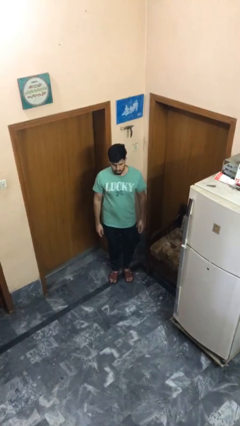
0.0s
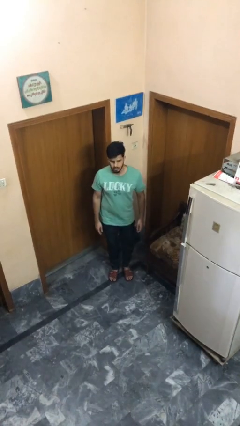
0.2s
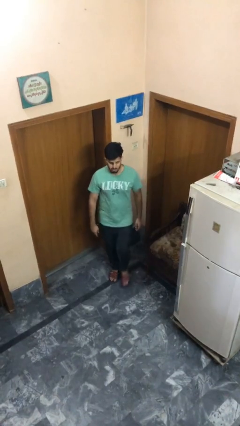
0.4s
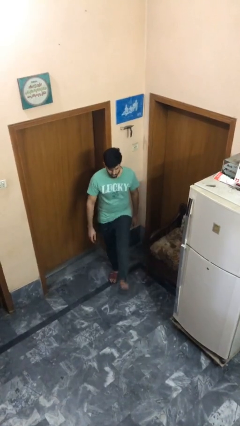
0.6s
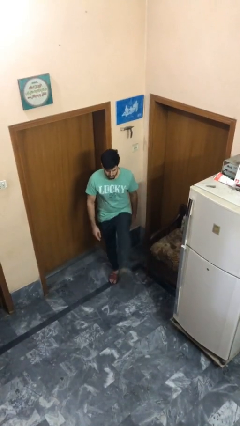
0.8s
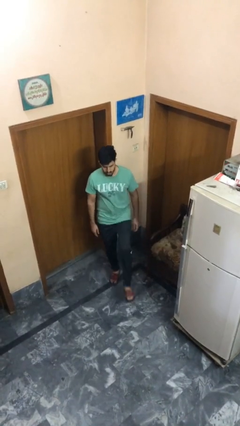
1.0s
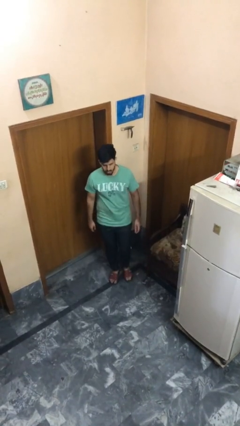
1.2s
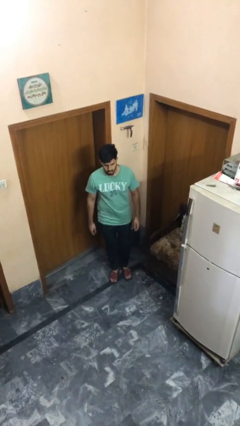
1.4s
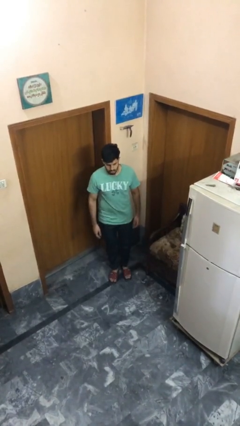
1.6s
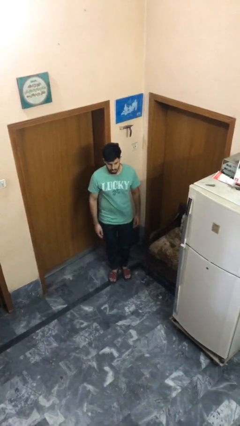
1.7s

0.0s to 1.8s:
person karate kicks

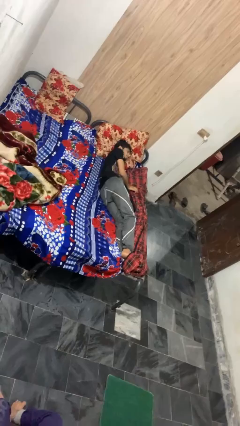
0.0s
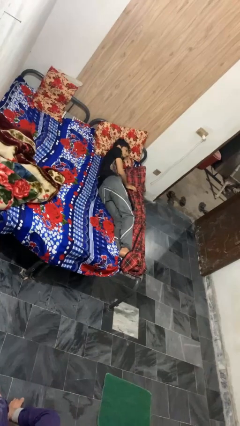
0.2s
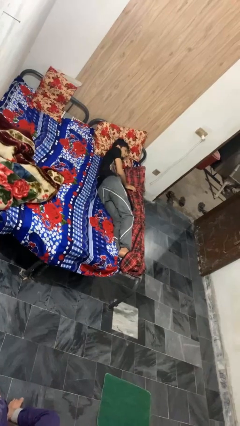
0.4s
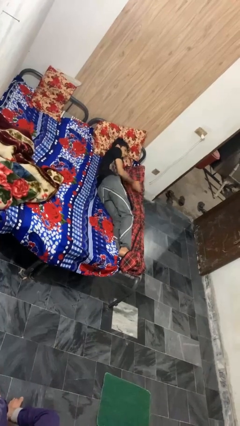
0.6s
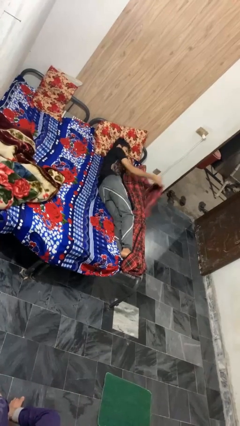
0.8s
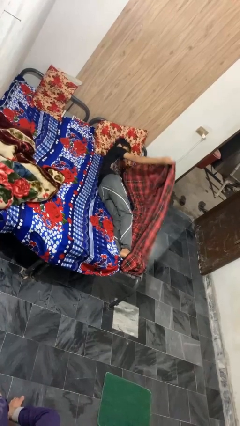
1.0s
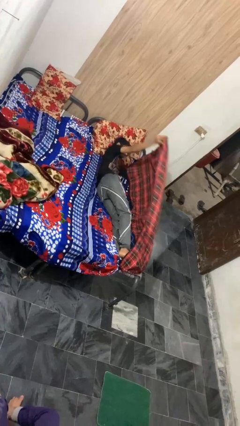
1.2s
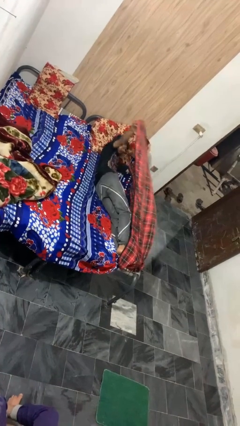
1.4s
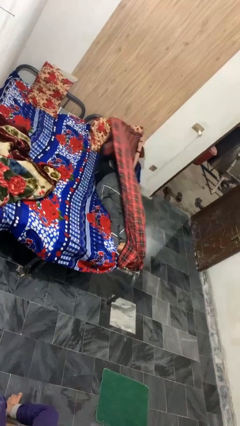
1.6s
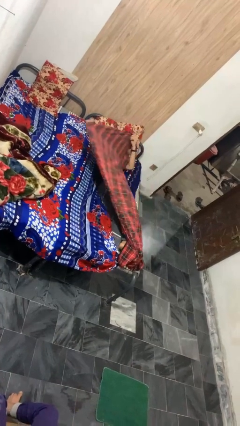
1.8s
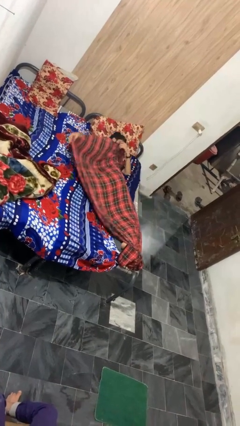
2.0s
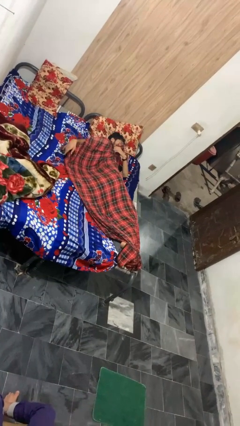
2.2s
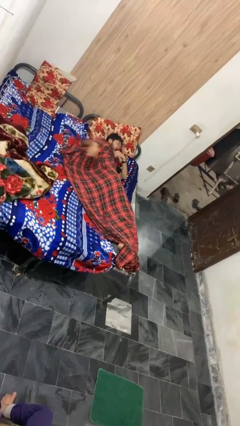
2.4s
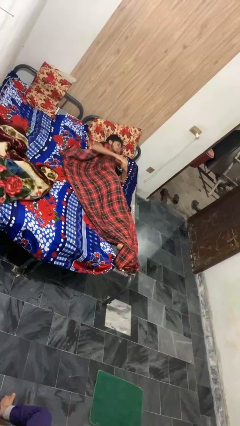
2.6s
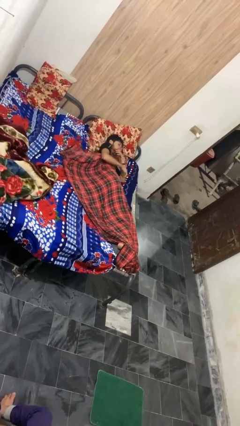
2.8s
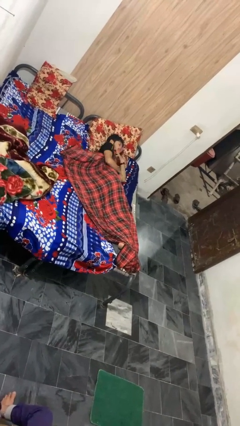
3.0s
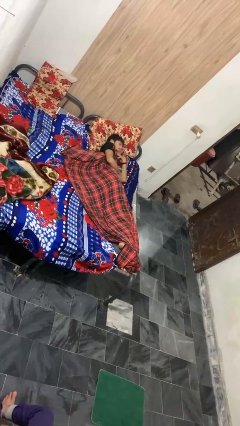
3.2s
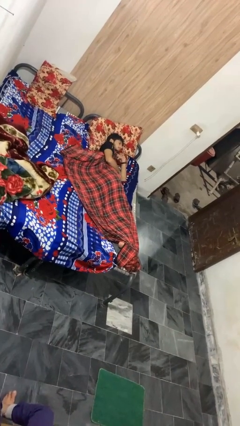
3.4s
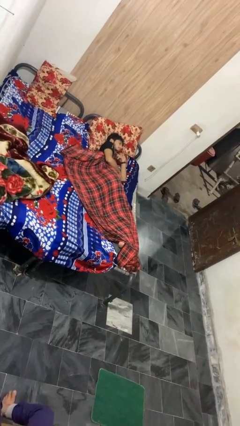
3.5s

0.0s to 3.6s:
person covers with blanket

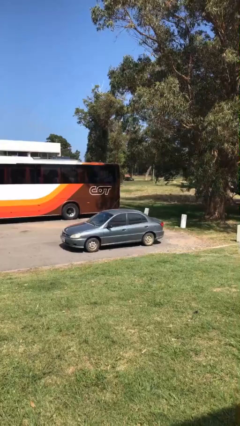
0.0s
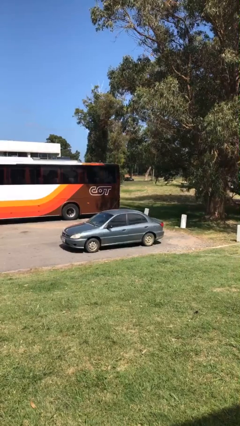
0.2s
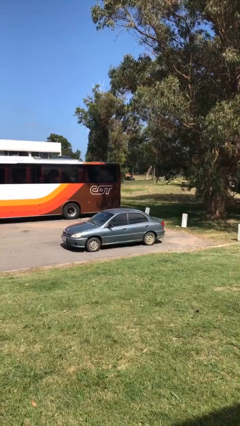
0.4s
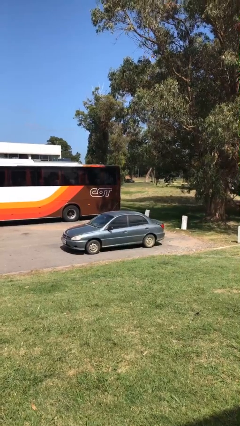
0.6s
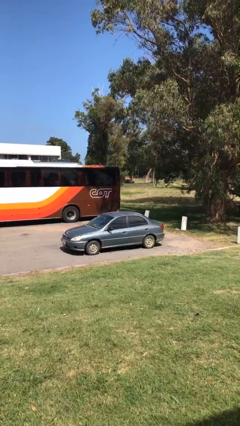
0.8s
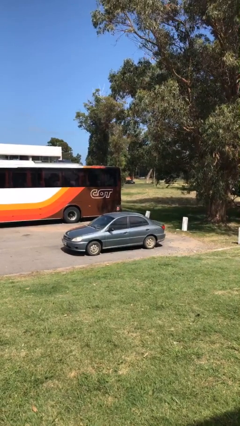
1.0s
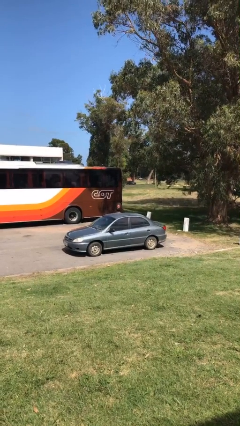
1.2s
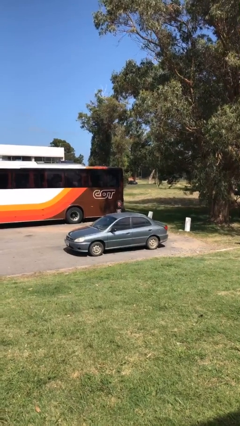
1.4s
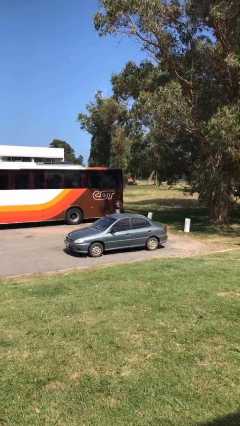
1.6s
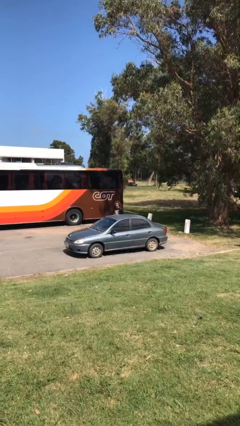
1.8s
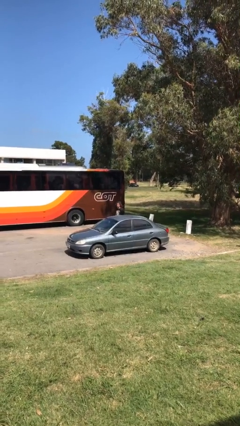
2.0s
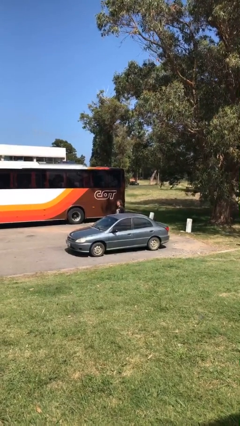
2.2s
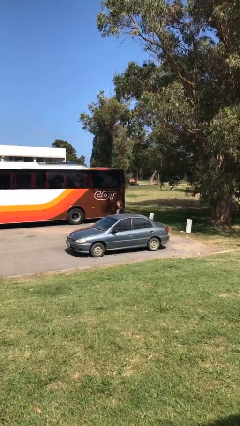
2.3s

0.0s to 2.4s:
person exits car

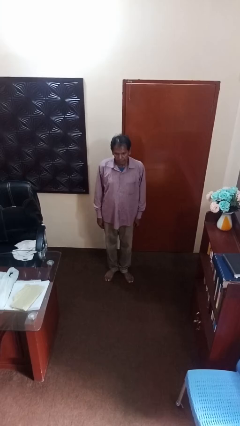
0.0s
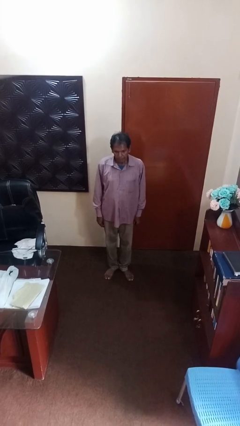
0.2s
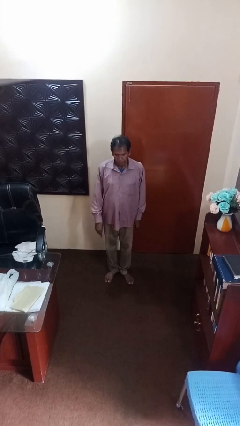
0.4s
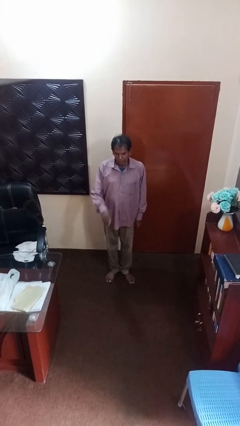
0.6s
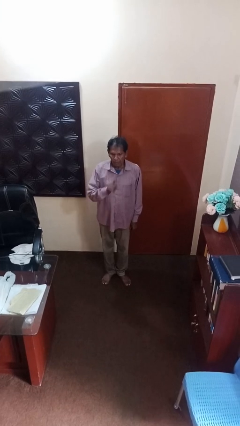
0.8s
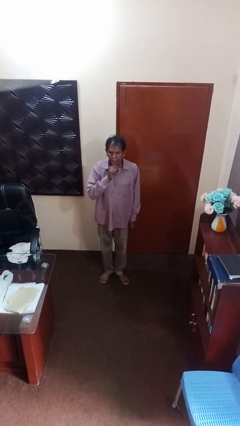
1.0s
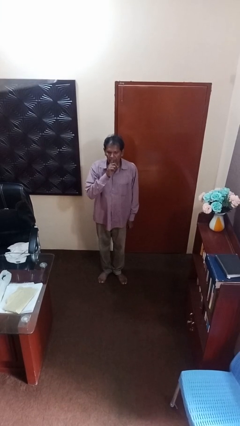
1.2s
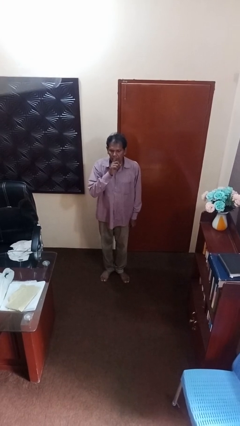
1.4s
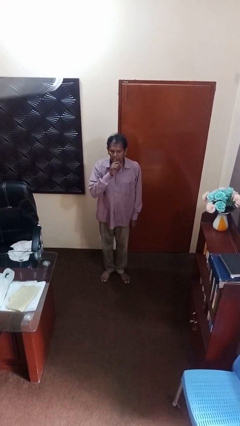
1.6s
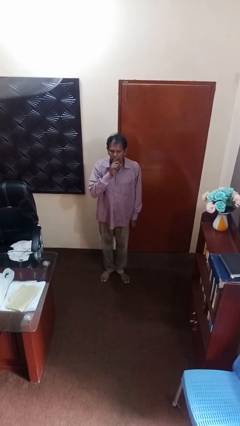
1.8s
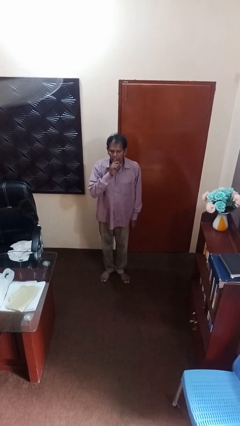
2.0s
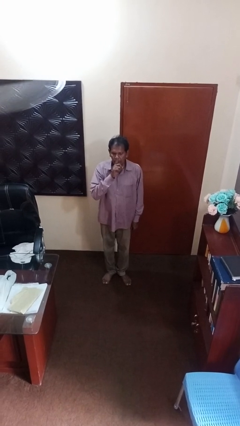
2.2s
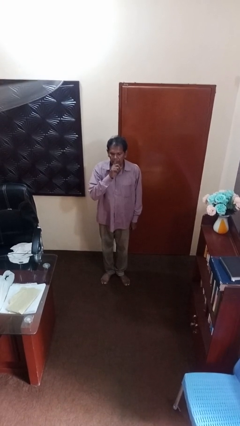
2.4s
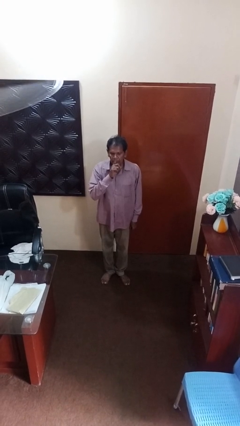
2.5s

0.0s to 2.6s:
person gestures blow kiss

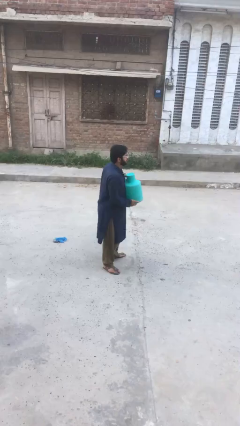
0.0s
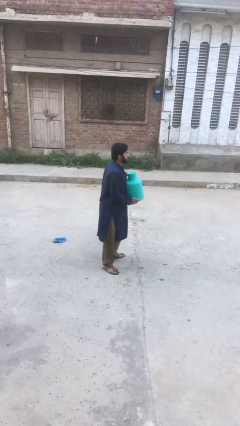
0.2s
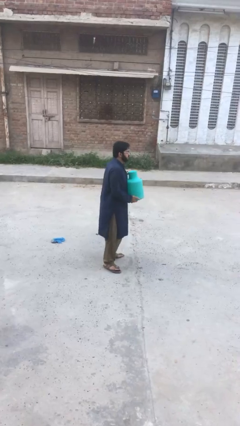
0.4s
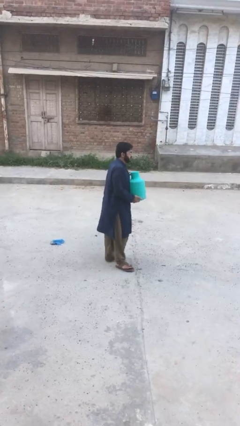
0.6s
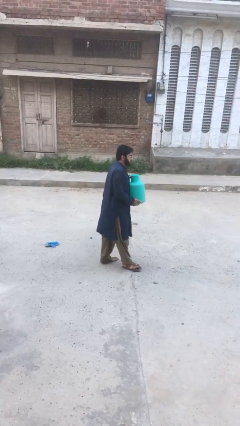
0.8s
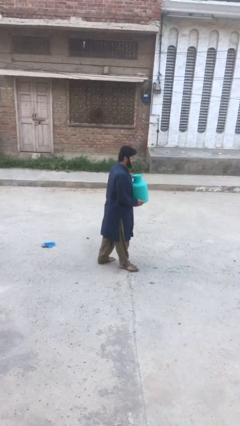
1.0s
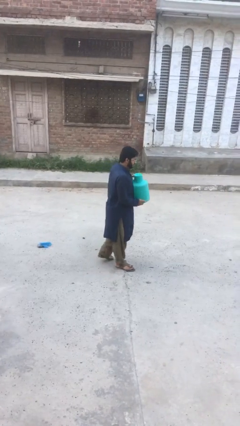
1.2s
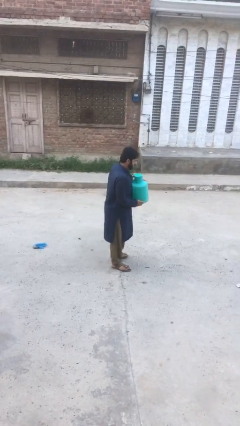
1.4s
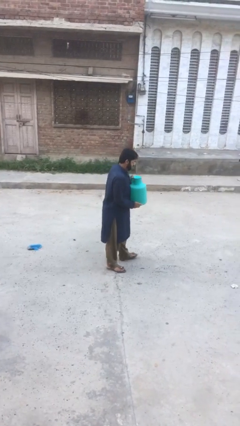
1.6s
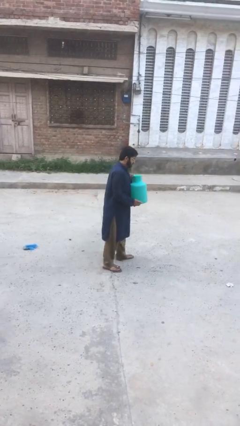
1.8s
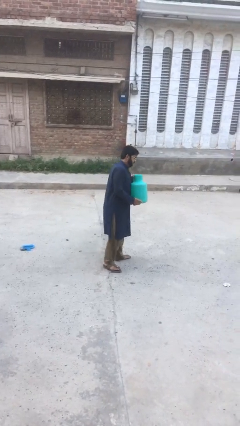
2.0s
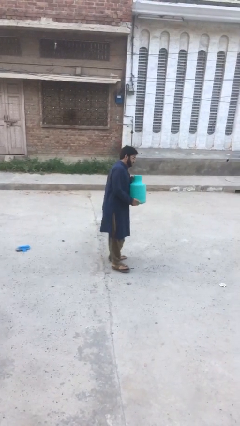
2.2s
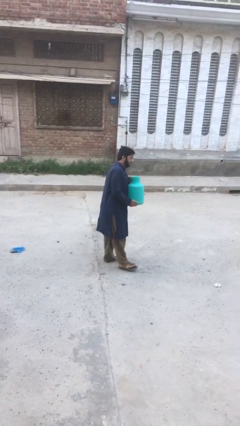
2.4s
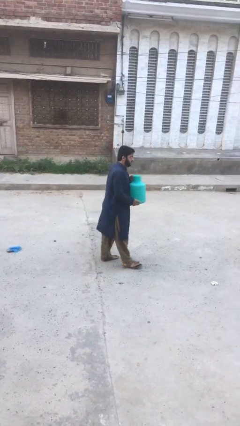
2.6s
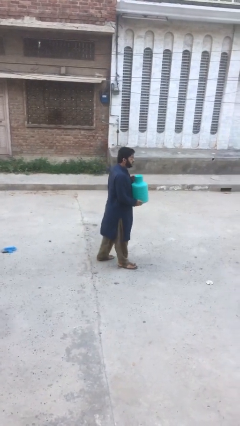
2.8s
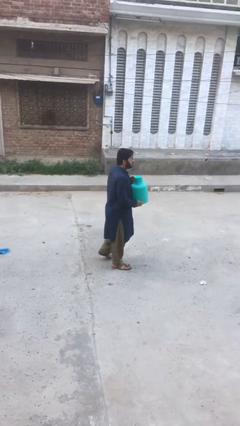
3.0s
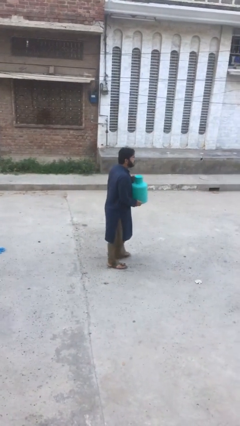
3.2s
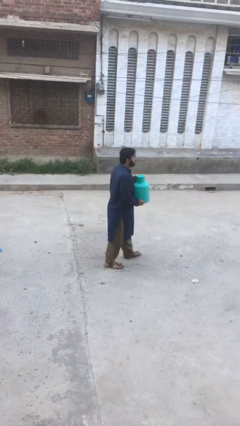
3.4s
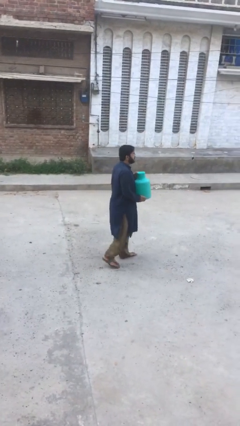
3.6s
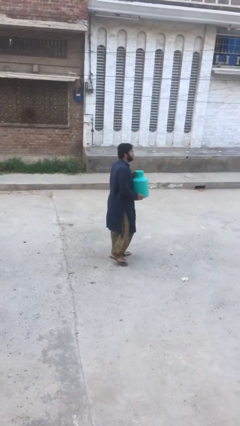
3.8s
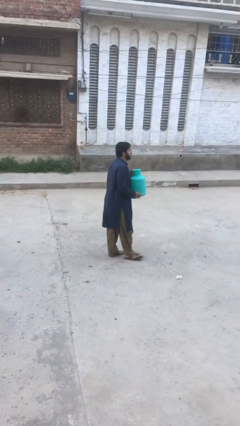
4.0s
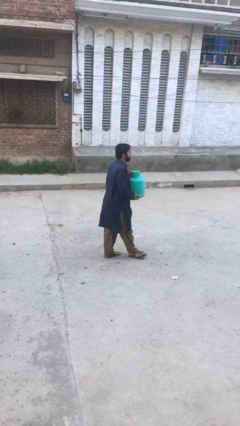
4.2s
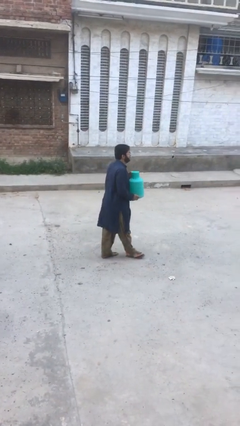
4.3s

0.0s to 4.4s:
person carries heavy object

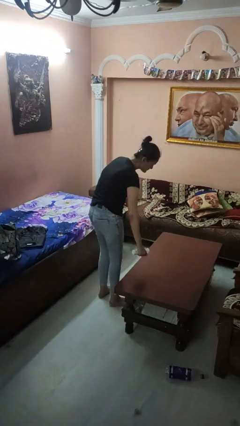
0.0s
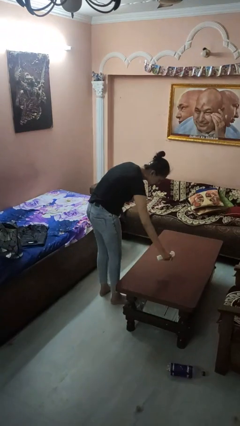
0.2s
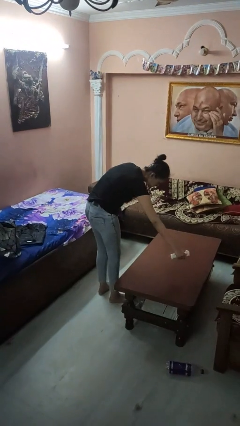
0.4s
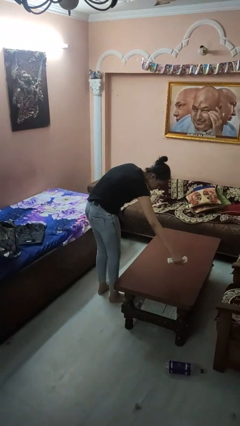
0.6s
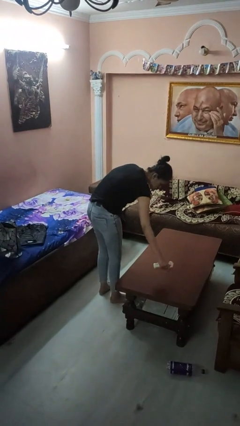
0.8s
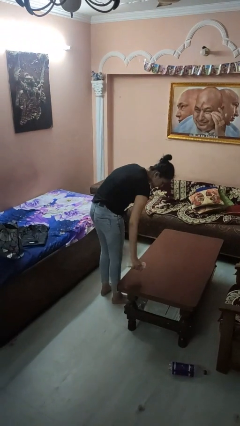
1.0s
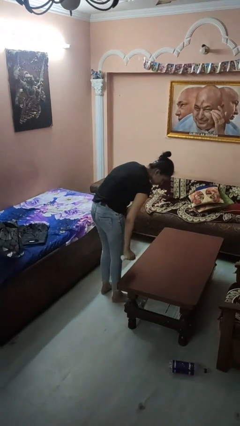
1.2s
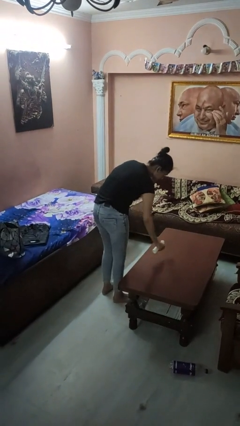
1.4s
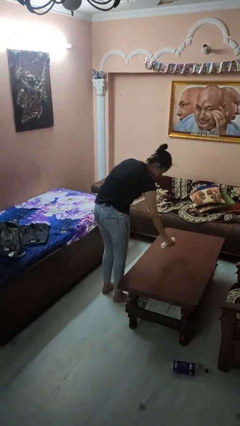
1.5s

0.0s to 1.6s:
person sprays from bottle

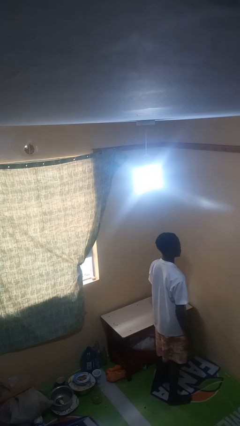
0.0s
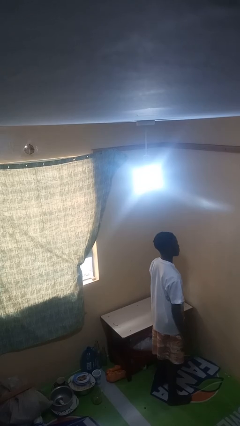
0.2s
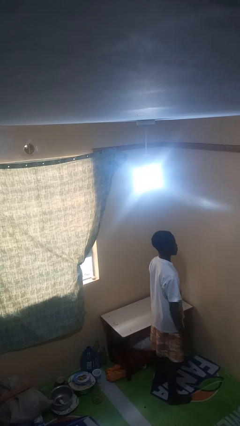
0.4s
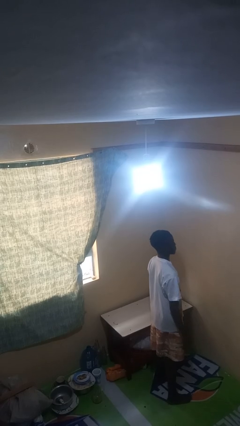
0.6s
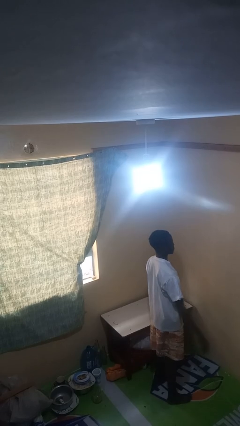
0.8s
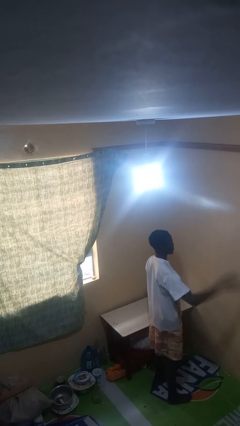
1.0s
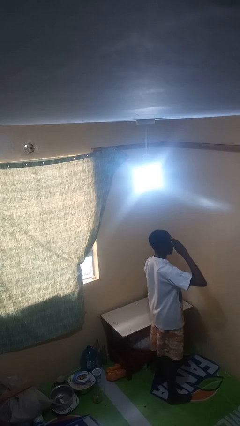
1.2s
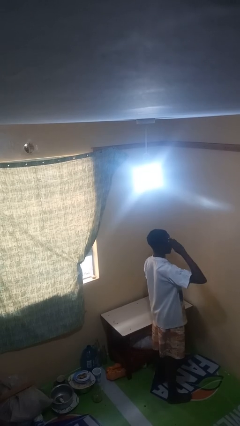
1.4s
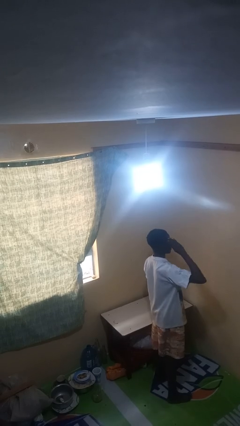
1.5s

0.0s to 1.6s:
person salutes
